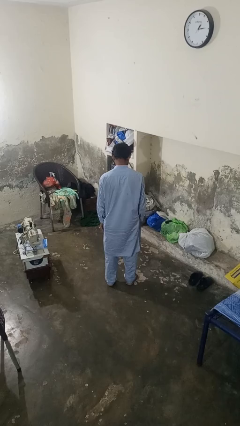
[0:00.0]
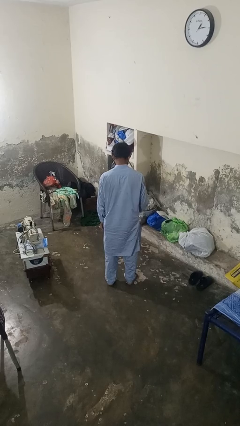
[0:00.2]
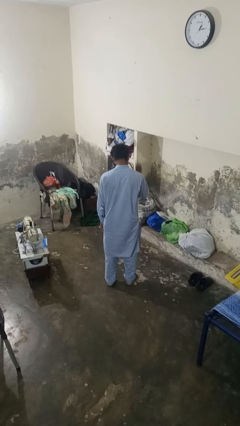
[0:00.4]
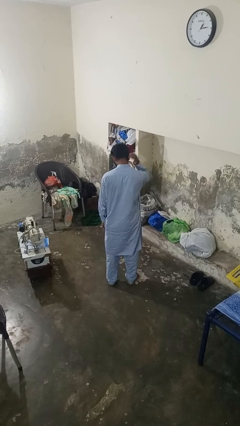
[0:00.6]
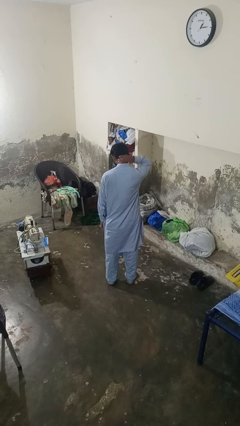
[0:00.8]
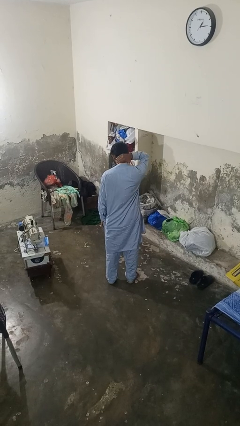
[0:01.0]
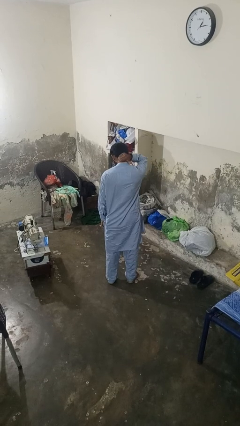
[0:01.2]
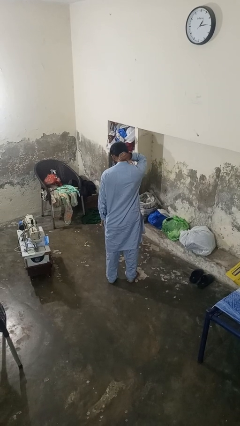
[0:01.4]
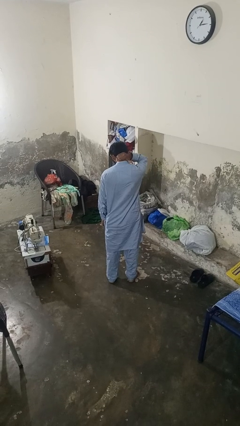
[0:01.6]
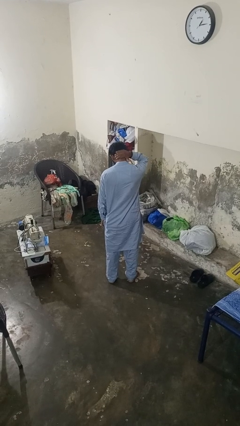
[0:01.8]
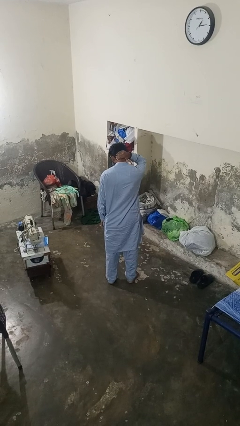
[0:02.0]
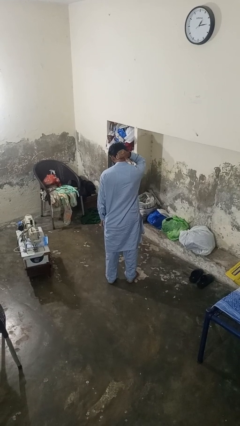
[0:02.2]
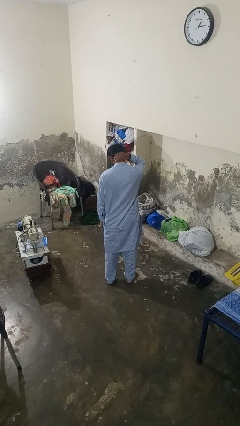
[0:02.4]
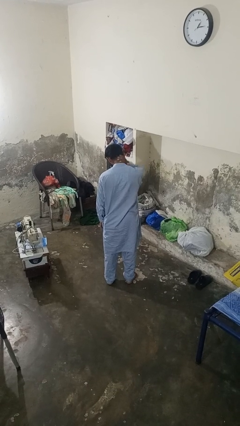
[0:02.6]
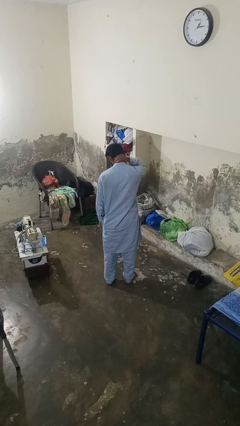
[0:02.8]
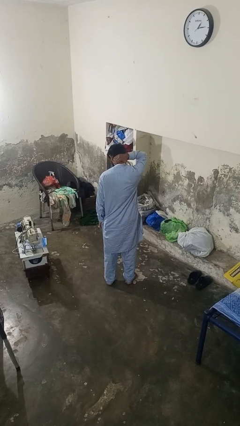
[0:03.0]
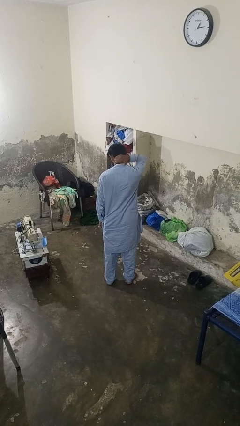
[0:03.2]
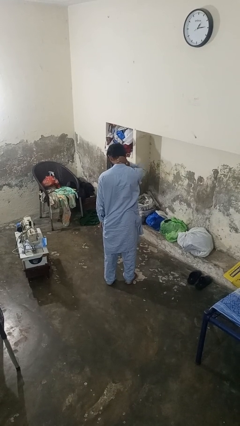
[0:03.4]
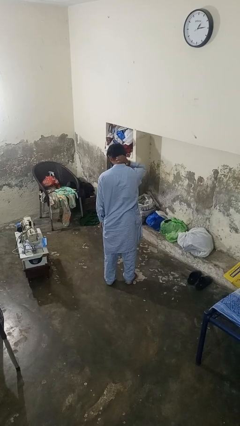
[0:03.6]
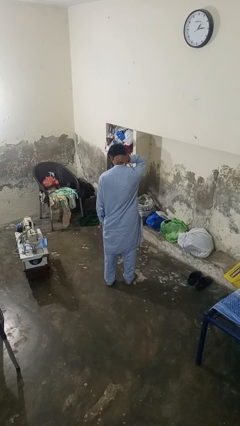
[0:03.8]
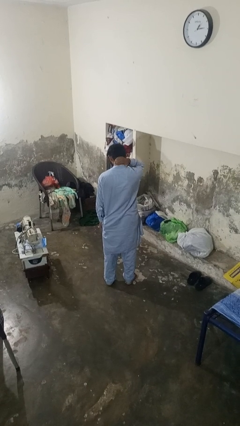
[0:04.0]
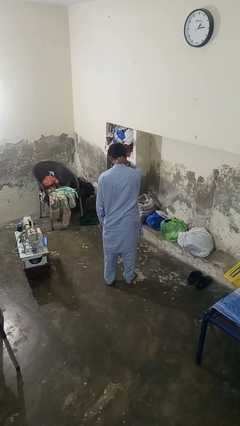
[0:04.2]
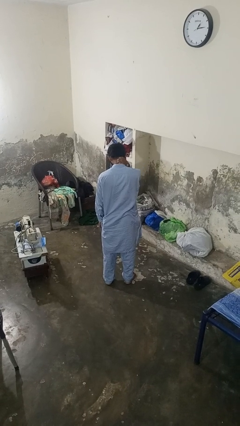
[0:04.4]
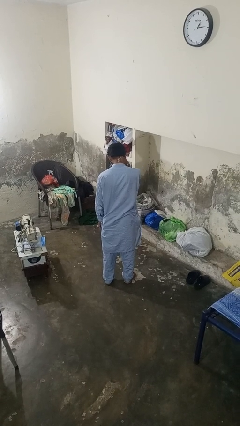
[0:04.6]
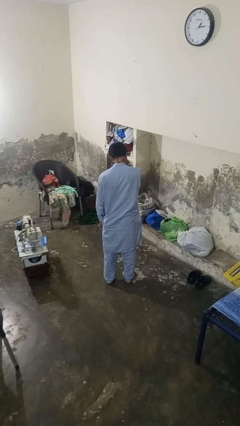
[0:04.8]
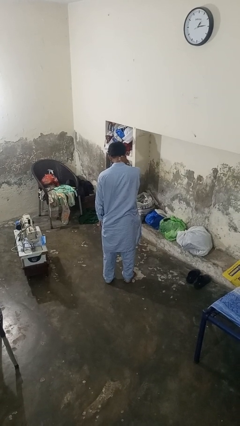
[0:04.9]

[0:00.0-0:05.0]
person rubs neck

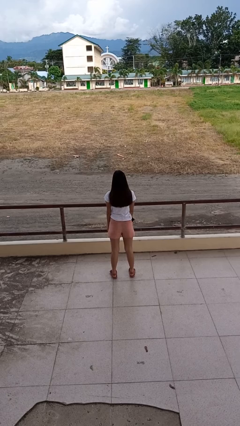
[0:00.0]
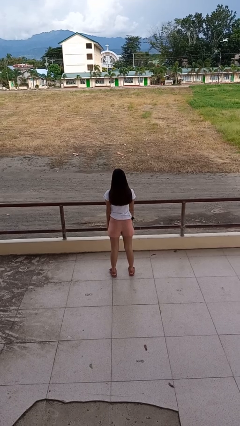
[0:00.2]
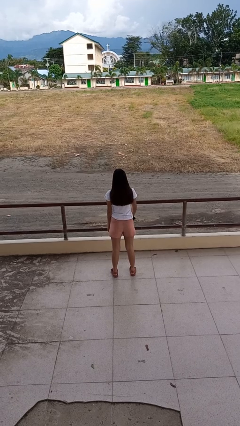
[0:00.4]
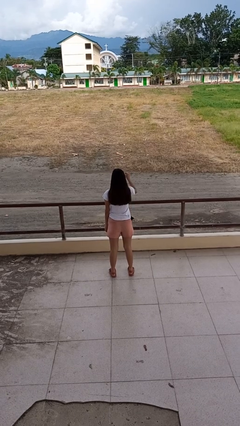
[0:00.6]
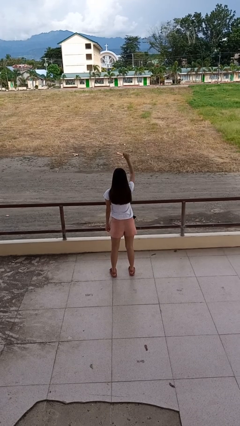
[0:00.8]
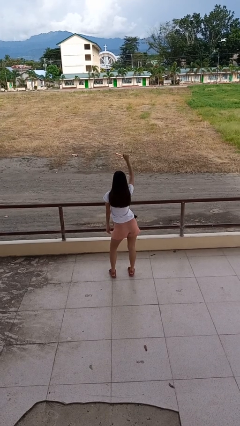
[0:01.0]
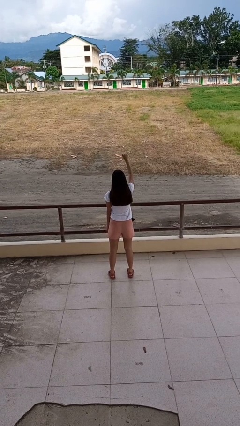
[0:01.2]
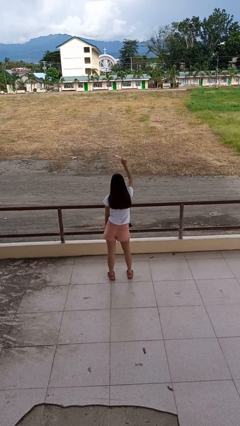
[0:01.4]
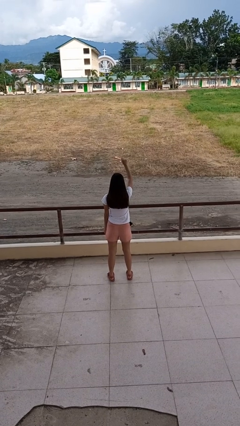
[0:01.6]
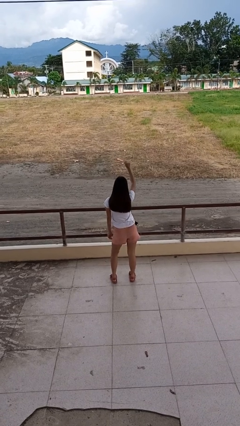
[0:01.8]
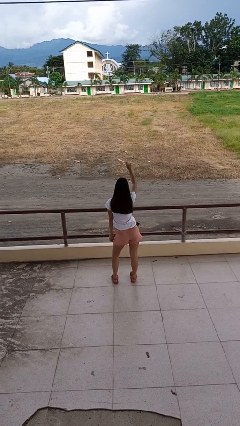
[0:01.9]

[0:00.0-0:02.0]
person dances in place

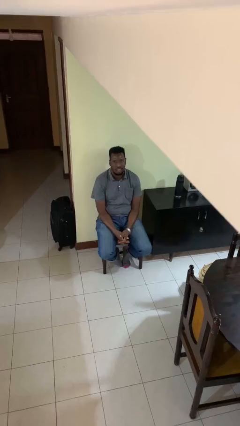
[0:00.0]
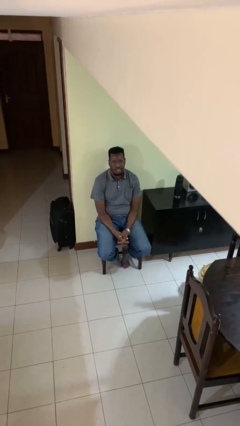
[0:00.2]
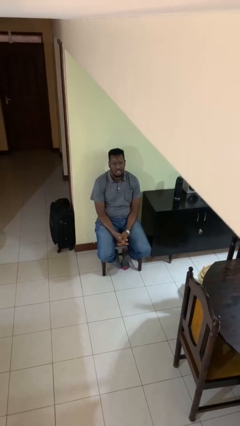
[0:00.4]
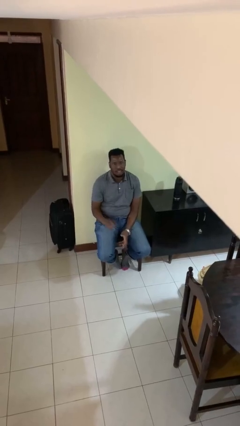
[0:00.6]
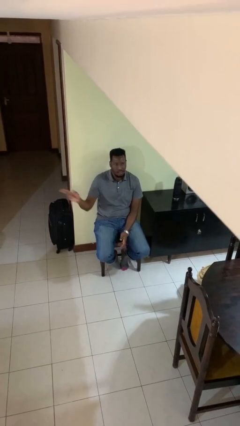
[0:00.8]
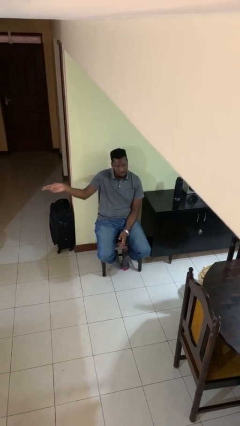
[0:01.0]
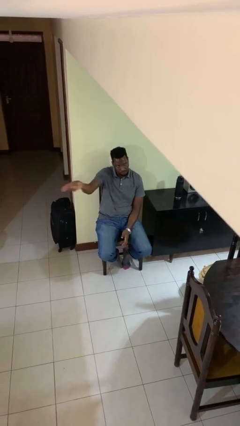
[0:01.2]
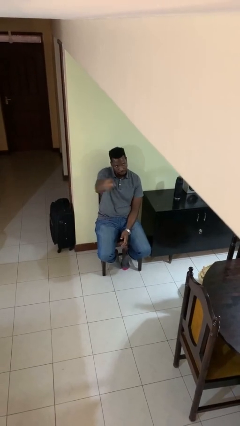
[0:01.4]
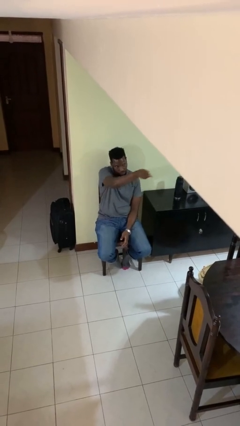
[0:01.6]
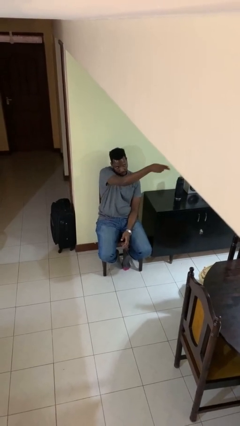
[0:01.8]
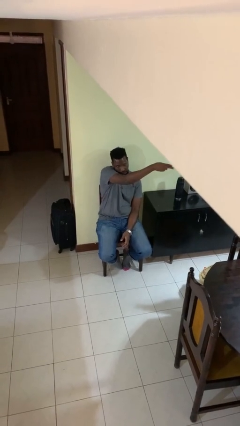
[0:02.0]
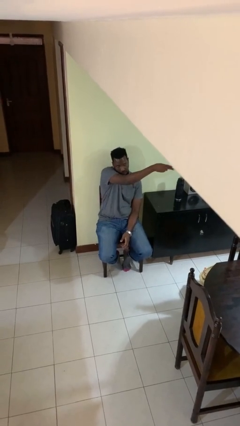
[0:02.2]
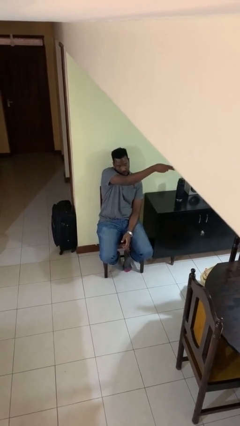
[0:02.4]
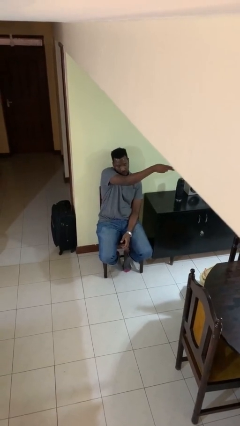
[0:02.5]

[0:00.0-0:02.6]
person gestures swipe left

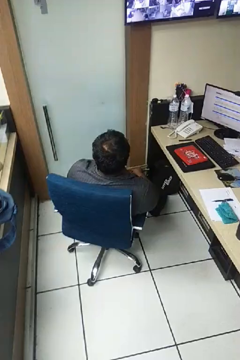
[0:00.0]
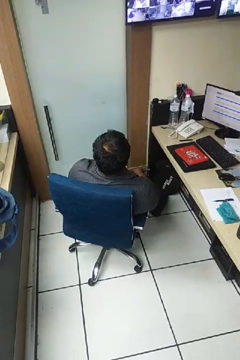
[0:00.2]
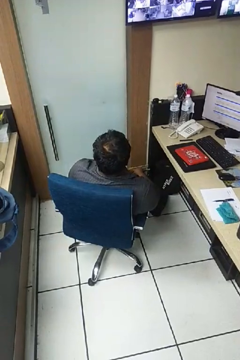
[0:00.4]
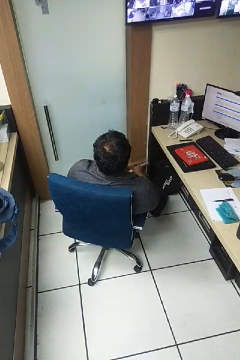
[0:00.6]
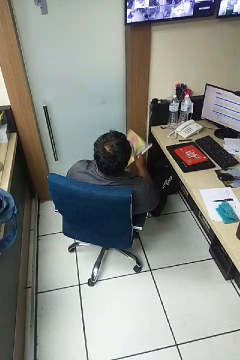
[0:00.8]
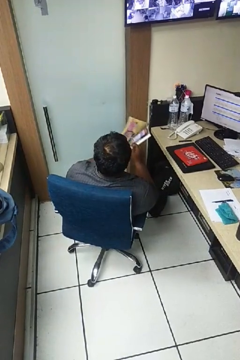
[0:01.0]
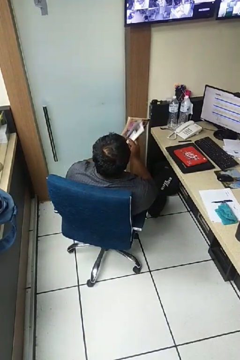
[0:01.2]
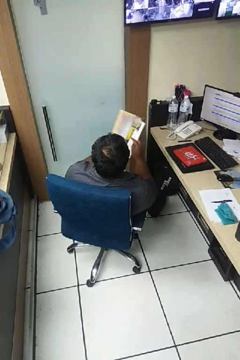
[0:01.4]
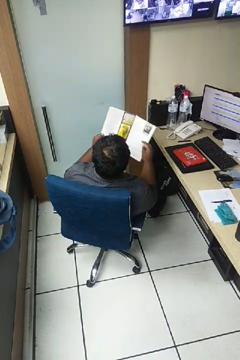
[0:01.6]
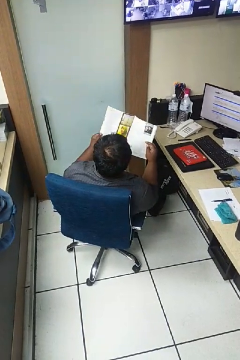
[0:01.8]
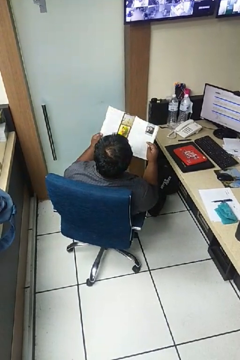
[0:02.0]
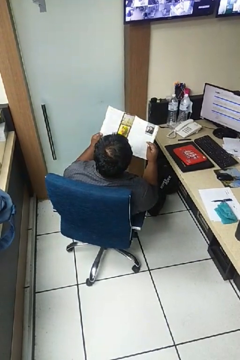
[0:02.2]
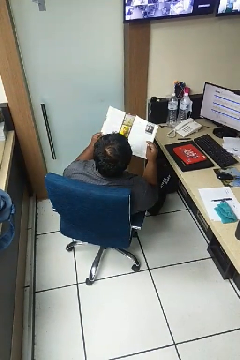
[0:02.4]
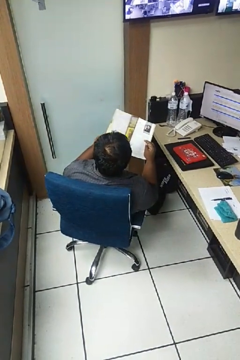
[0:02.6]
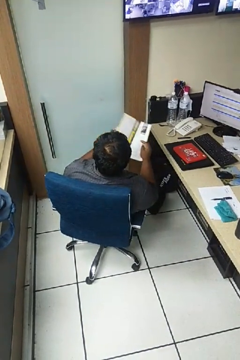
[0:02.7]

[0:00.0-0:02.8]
person reads magazine

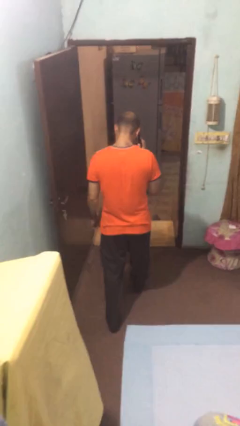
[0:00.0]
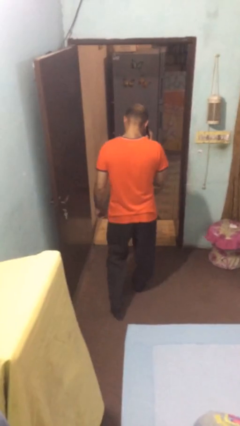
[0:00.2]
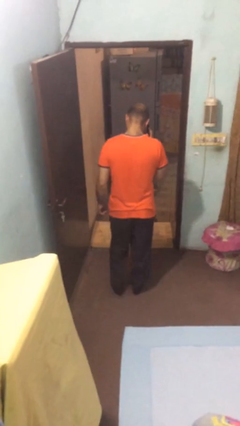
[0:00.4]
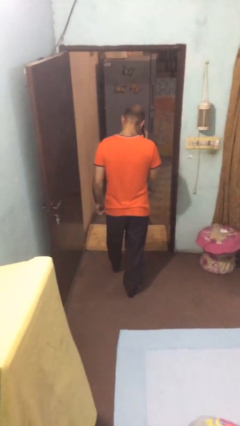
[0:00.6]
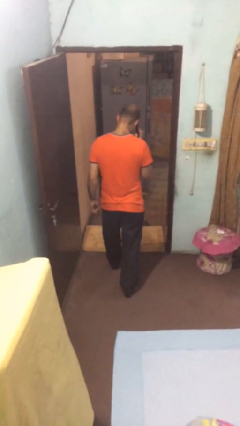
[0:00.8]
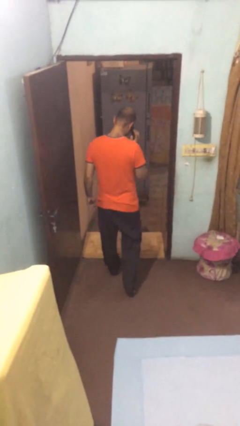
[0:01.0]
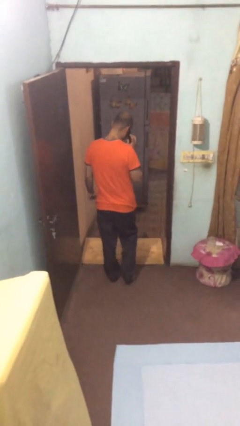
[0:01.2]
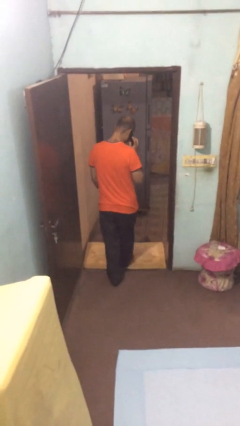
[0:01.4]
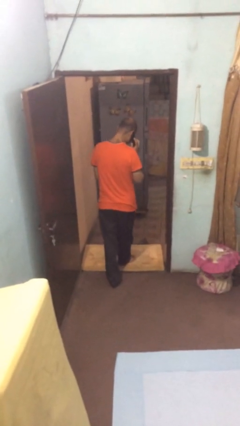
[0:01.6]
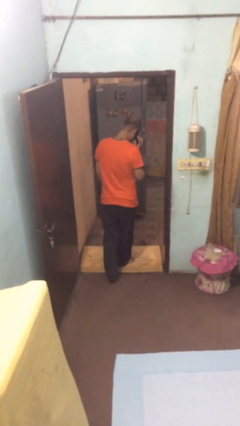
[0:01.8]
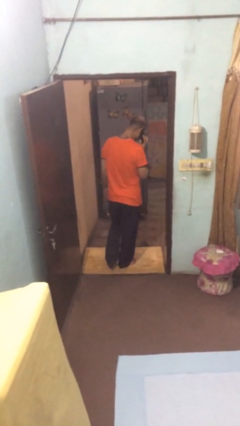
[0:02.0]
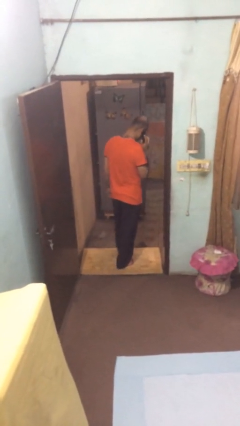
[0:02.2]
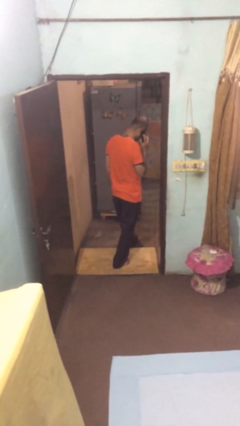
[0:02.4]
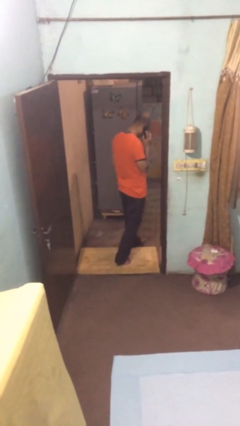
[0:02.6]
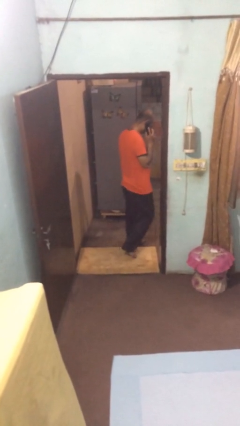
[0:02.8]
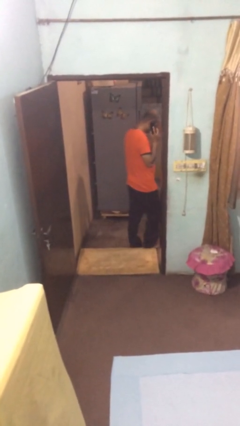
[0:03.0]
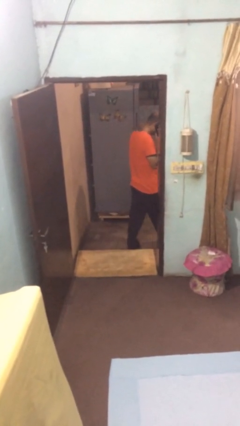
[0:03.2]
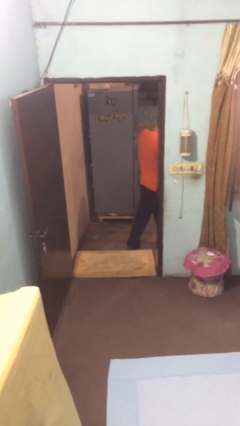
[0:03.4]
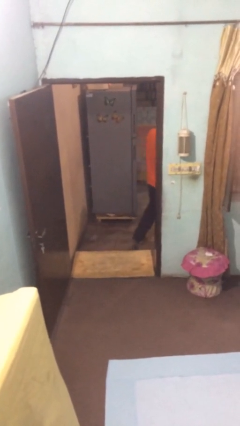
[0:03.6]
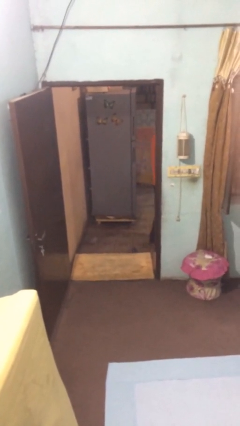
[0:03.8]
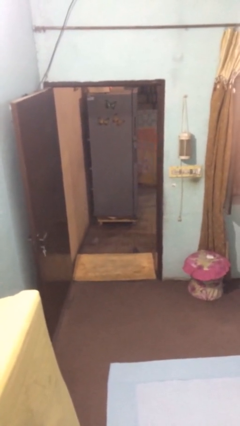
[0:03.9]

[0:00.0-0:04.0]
person exits scene through structure

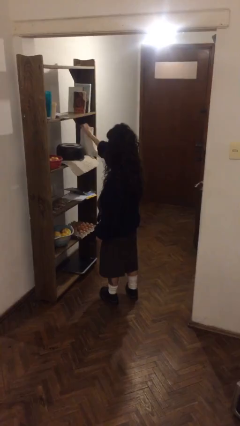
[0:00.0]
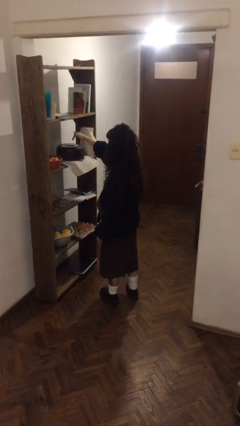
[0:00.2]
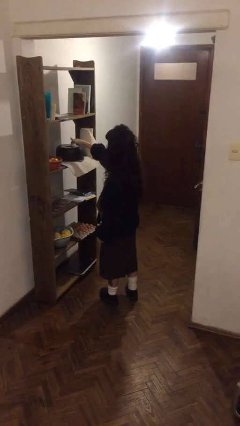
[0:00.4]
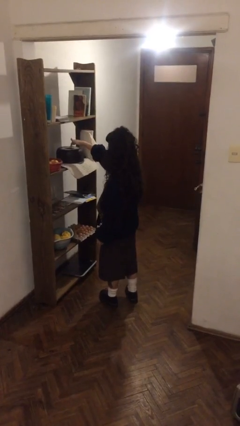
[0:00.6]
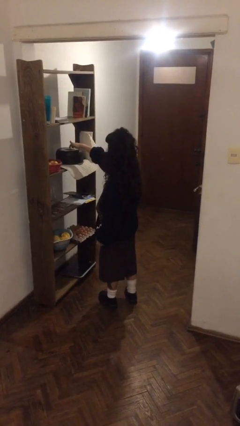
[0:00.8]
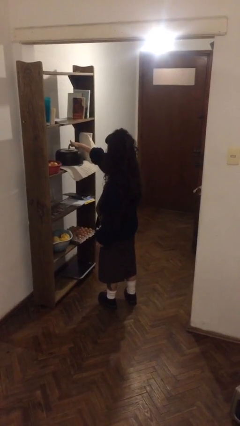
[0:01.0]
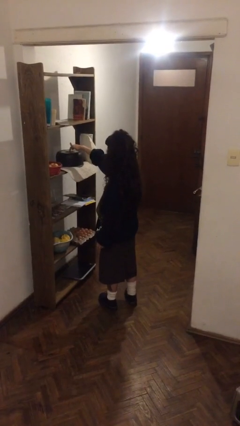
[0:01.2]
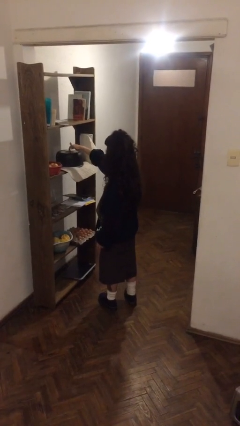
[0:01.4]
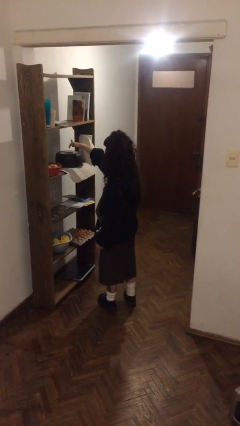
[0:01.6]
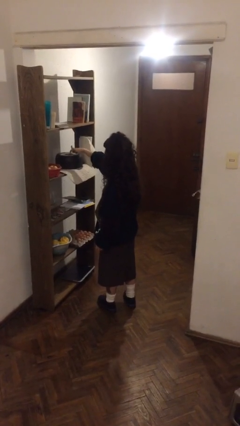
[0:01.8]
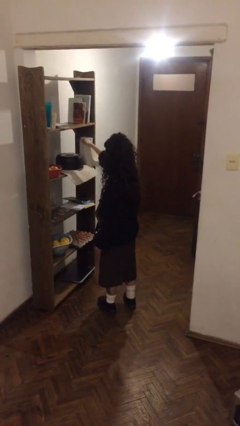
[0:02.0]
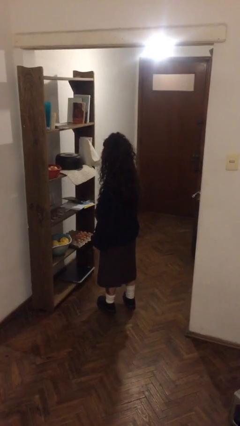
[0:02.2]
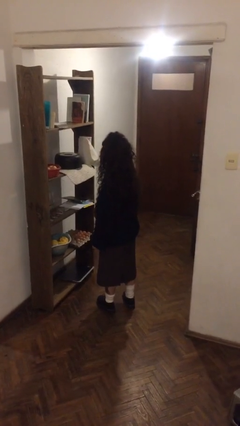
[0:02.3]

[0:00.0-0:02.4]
person taps object with finger
